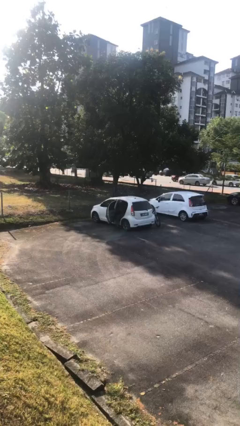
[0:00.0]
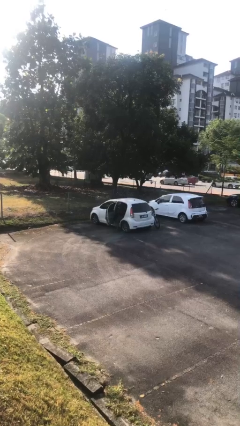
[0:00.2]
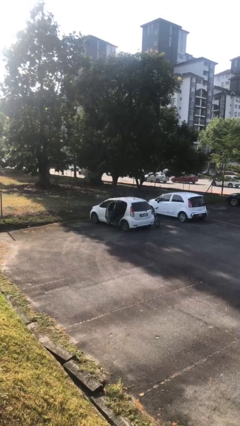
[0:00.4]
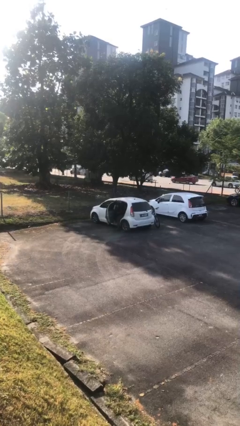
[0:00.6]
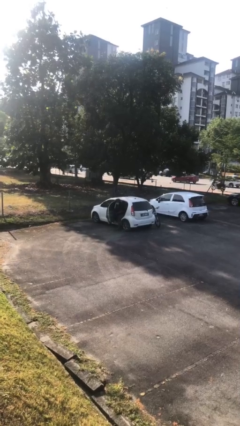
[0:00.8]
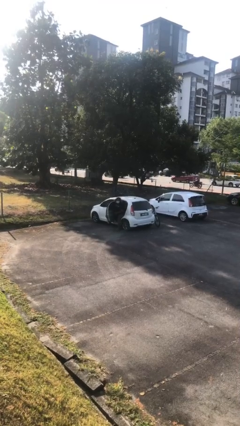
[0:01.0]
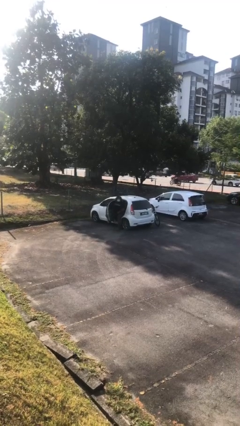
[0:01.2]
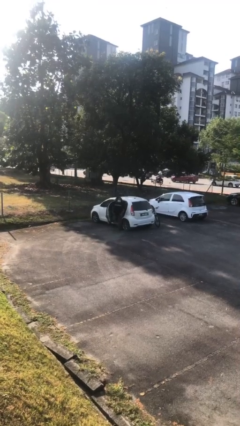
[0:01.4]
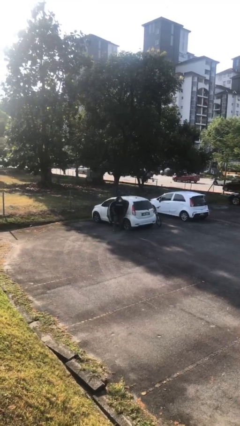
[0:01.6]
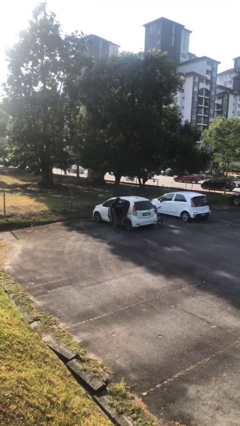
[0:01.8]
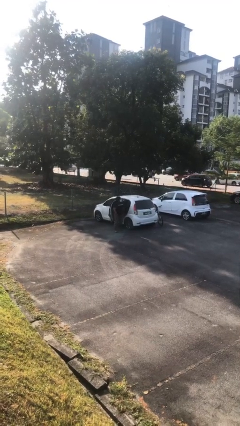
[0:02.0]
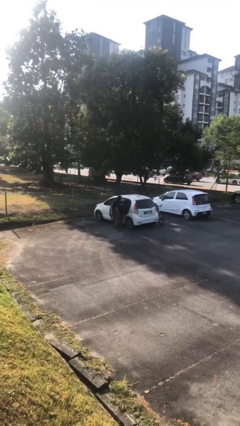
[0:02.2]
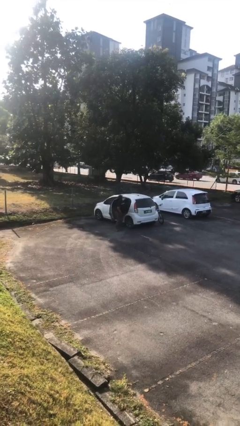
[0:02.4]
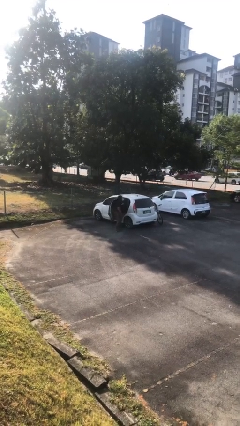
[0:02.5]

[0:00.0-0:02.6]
person exits car

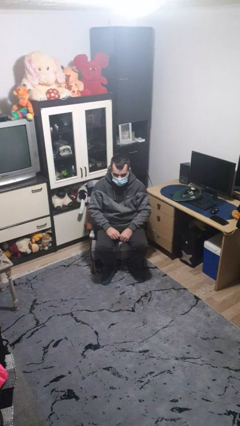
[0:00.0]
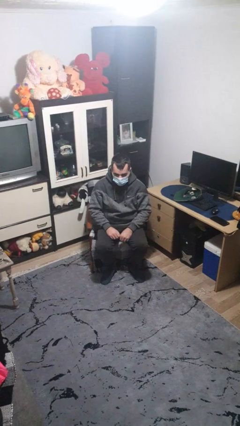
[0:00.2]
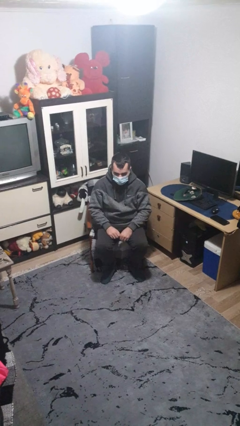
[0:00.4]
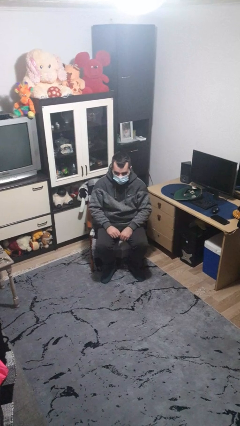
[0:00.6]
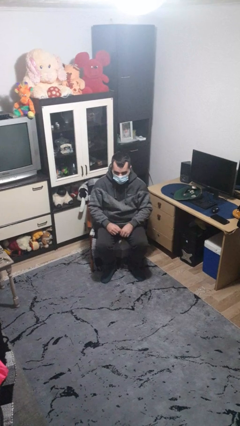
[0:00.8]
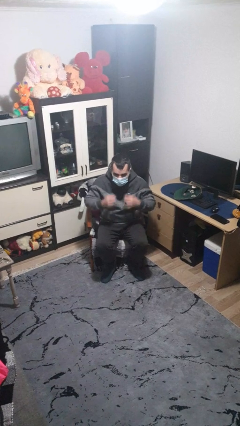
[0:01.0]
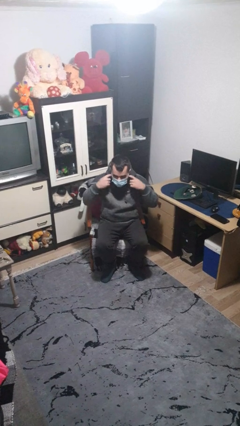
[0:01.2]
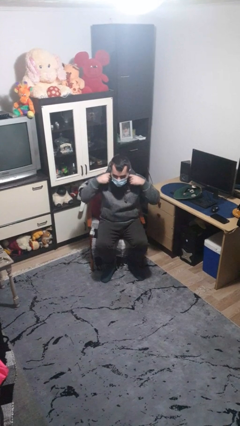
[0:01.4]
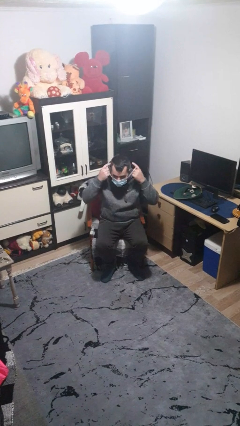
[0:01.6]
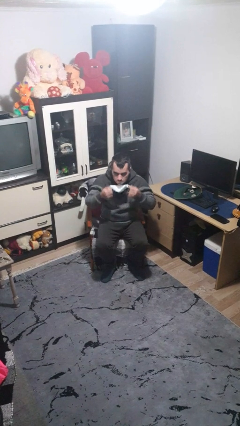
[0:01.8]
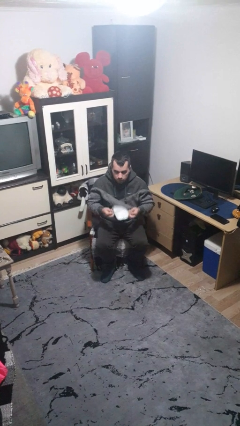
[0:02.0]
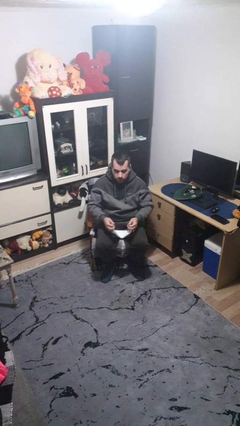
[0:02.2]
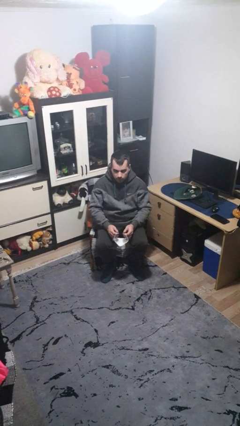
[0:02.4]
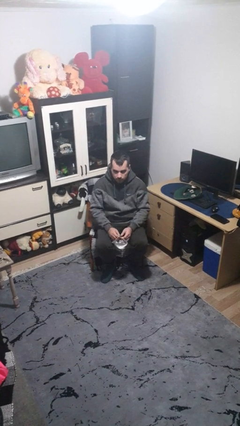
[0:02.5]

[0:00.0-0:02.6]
person takes off facemask

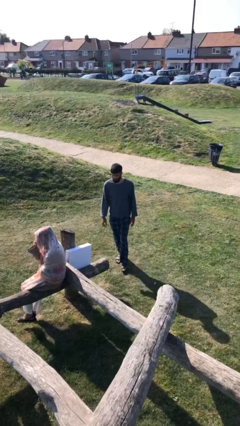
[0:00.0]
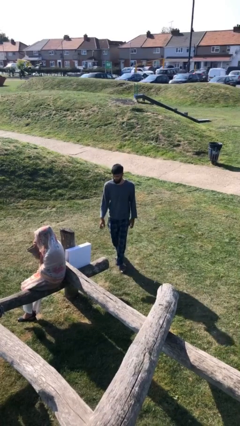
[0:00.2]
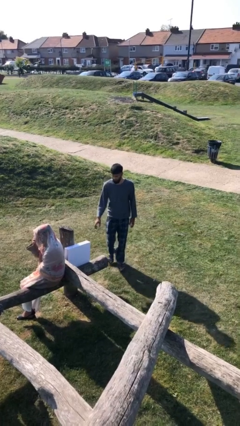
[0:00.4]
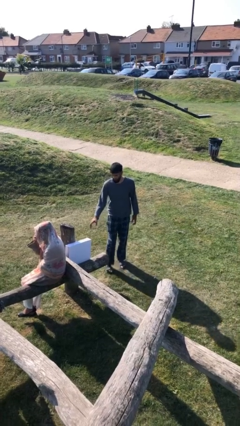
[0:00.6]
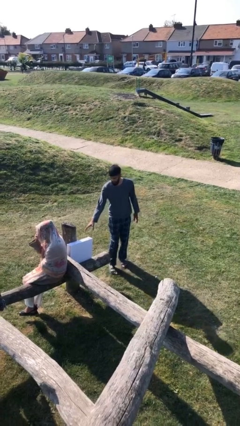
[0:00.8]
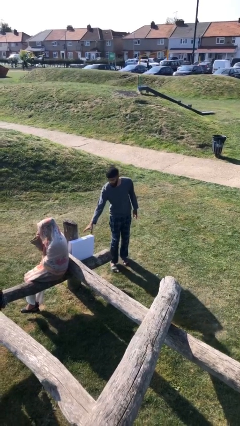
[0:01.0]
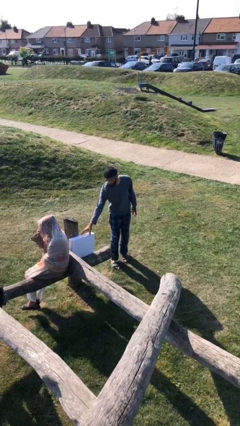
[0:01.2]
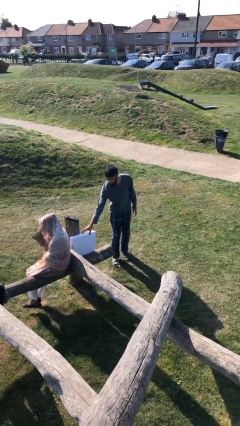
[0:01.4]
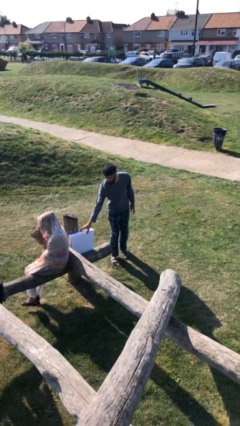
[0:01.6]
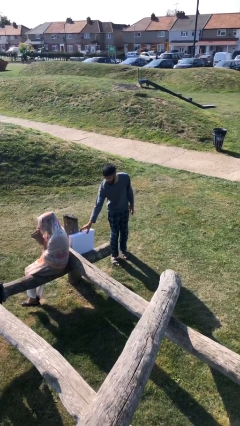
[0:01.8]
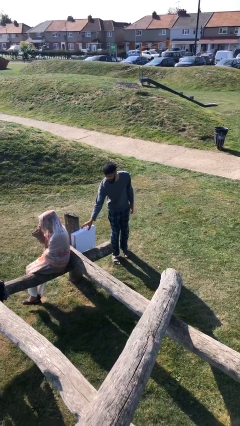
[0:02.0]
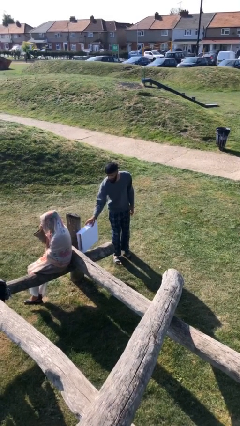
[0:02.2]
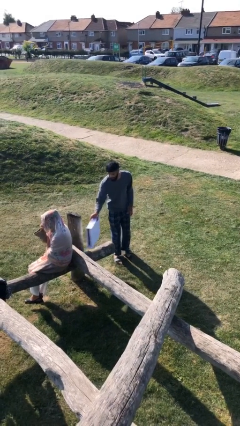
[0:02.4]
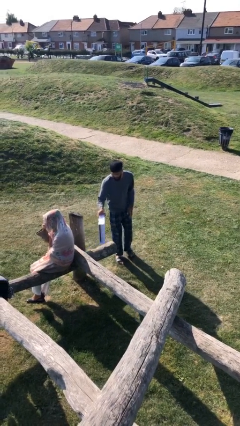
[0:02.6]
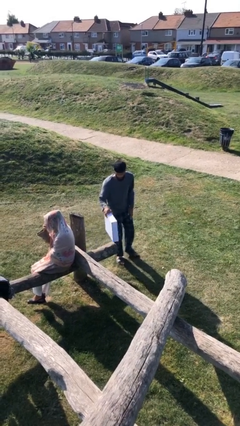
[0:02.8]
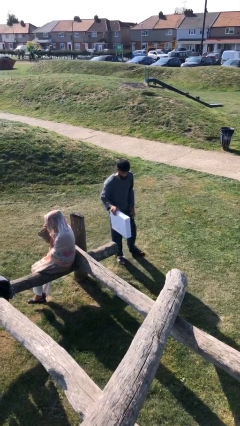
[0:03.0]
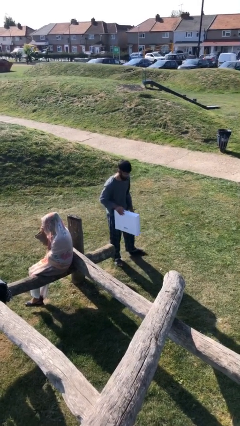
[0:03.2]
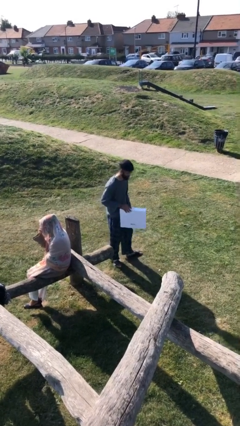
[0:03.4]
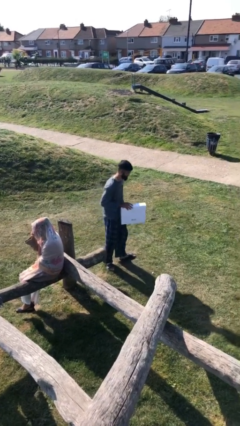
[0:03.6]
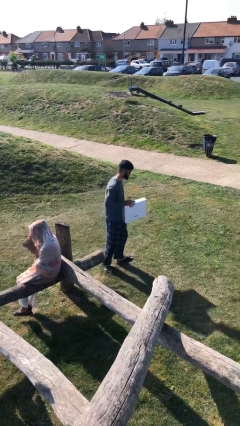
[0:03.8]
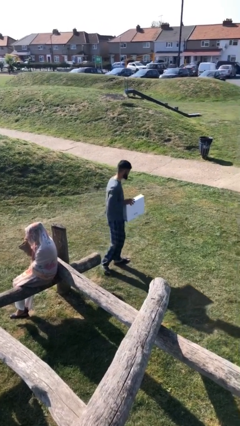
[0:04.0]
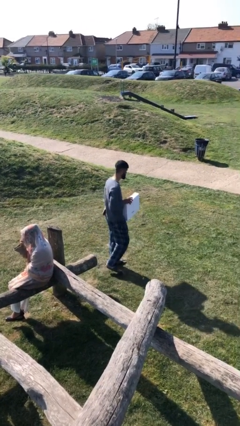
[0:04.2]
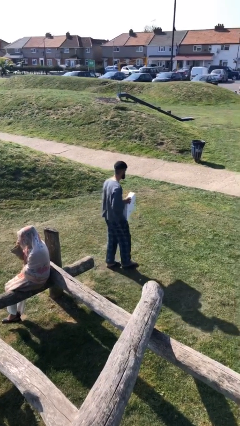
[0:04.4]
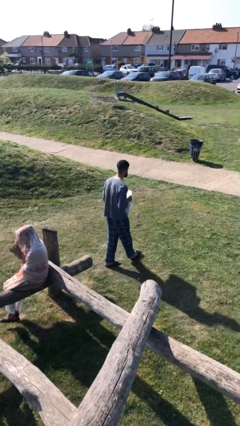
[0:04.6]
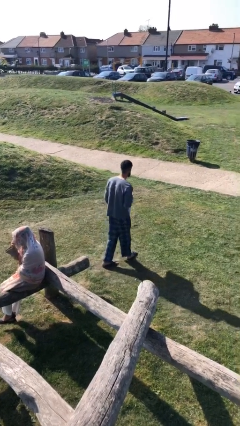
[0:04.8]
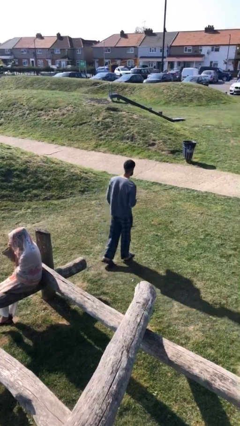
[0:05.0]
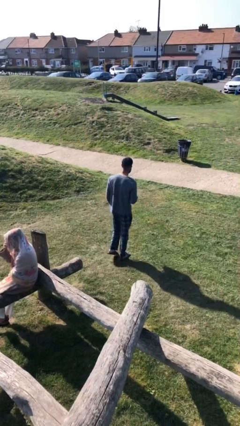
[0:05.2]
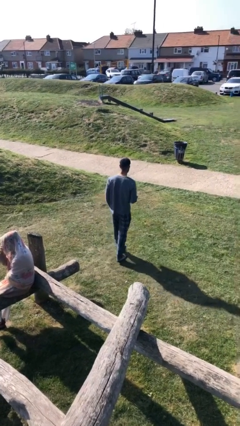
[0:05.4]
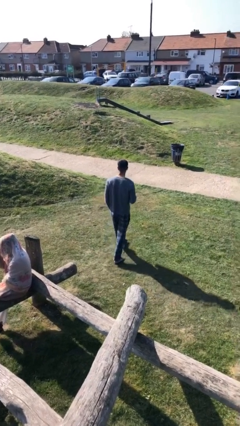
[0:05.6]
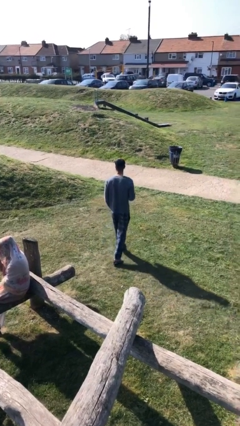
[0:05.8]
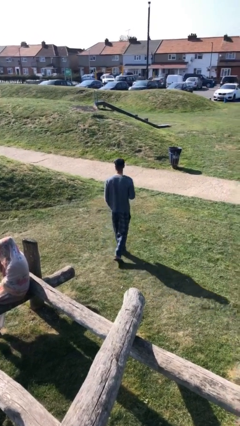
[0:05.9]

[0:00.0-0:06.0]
person steals object from person

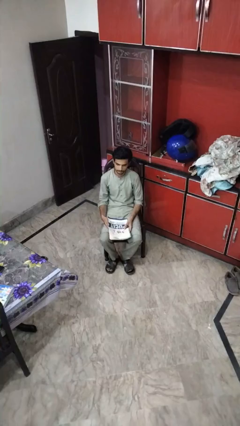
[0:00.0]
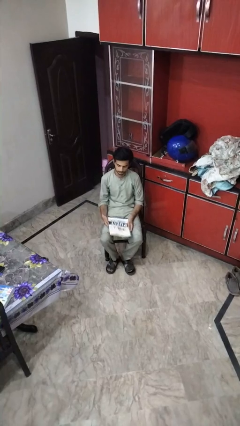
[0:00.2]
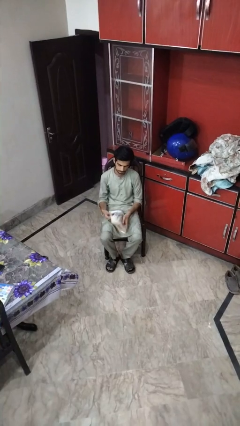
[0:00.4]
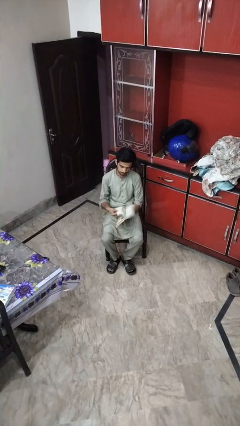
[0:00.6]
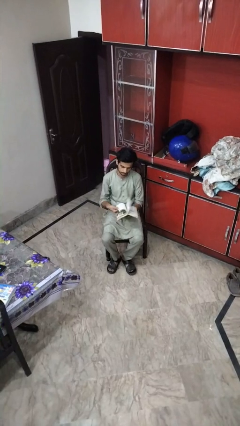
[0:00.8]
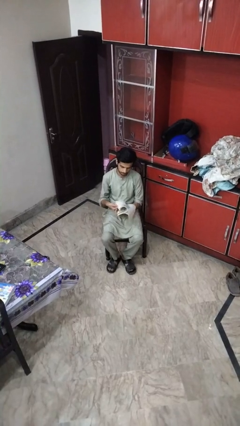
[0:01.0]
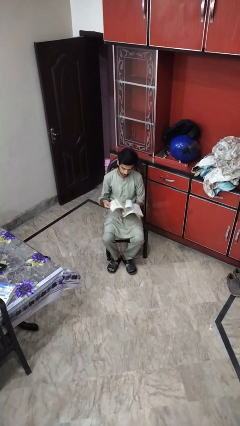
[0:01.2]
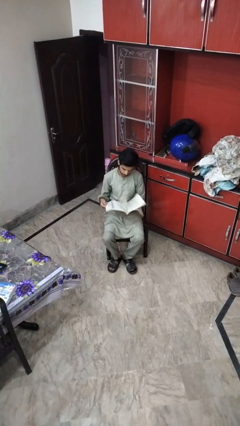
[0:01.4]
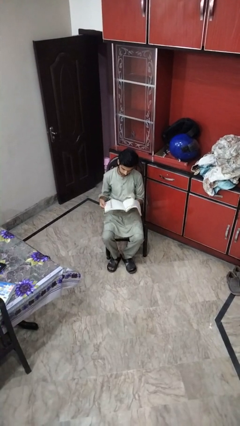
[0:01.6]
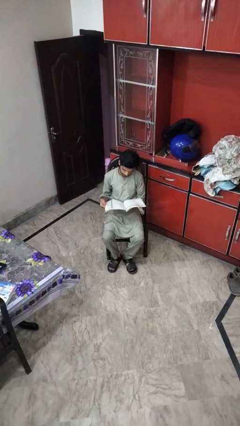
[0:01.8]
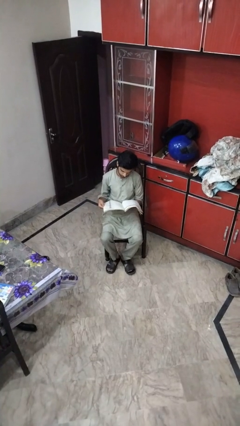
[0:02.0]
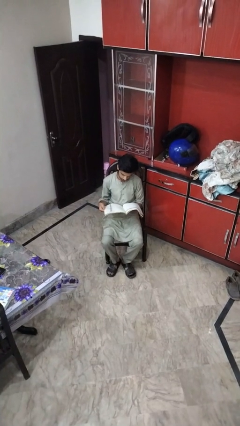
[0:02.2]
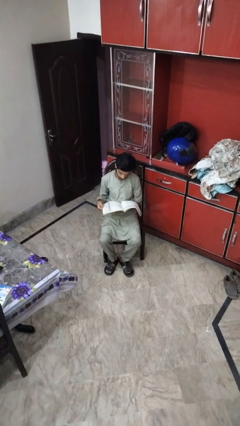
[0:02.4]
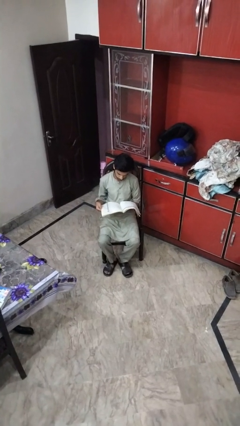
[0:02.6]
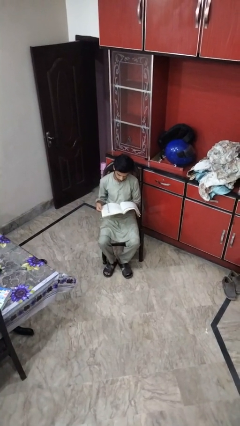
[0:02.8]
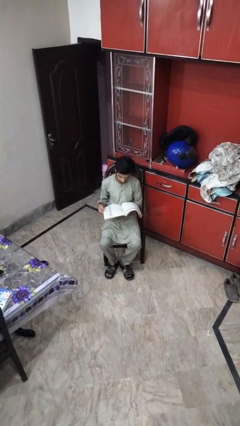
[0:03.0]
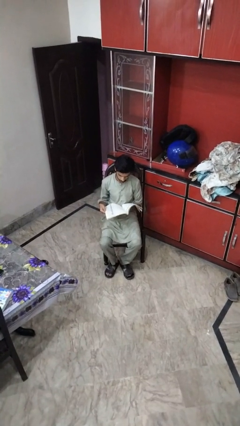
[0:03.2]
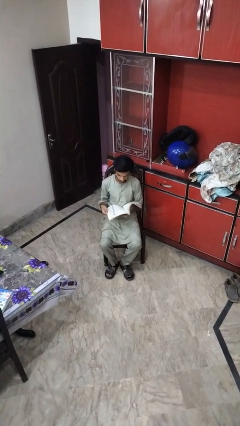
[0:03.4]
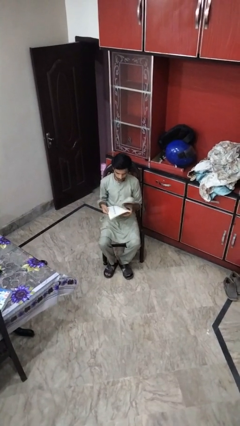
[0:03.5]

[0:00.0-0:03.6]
person reads magazine

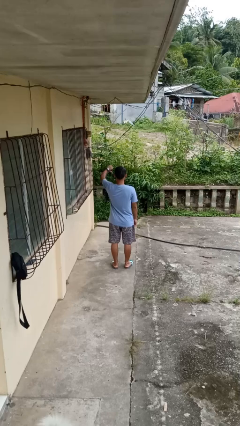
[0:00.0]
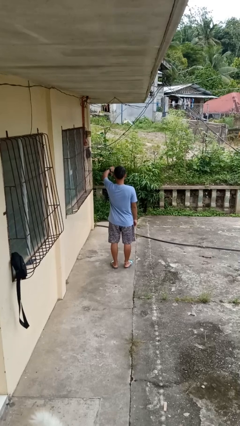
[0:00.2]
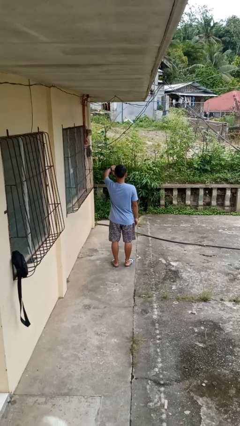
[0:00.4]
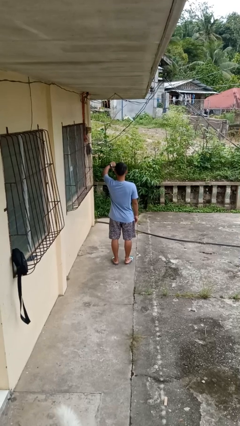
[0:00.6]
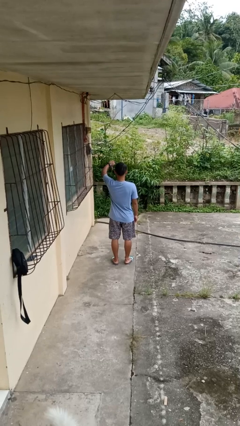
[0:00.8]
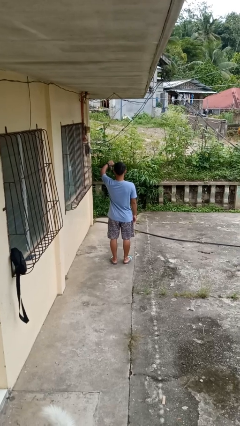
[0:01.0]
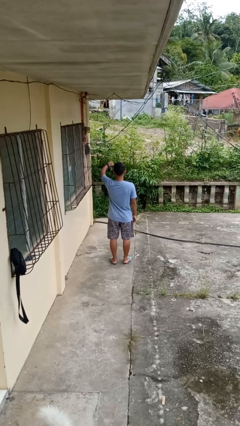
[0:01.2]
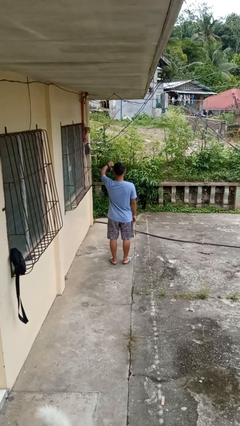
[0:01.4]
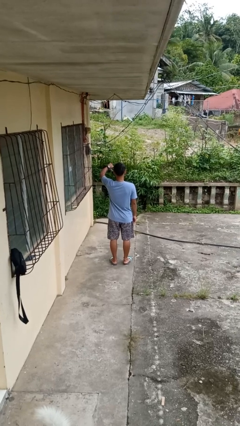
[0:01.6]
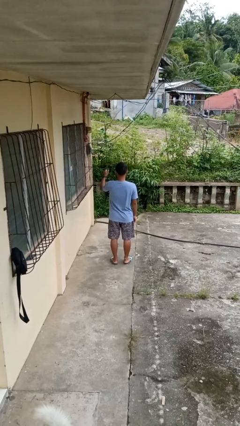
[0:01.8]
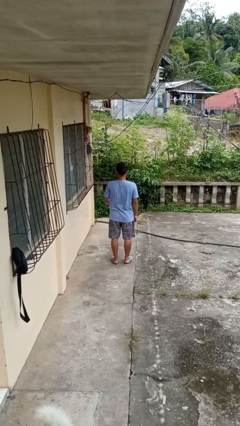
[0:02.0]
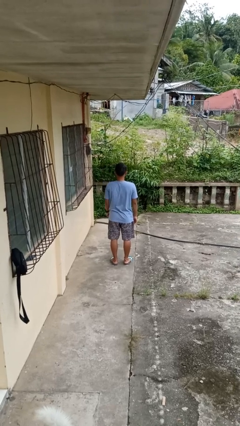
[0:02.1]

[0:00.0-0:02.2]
person gestures thumbs down

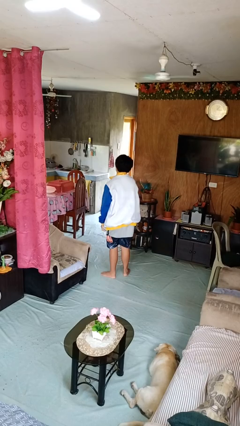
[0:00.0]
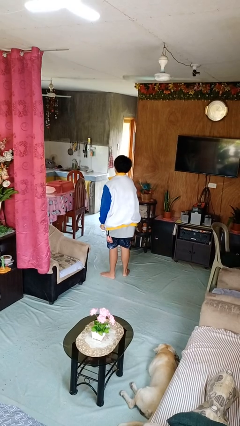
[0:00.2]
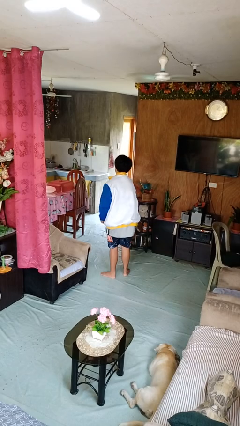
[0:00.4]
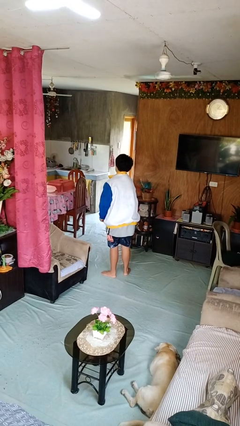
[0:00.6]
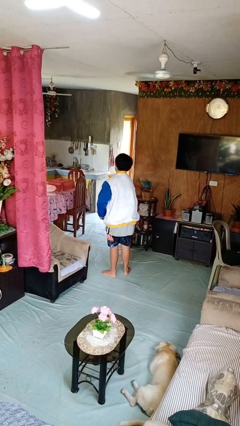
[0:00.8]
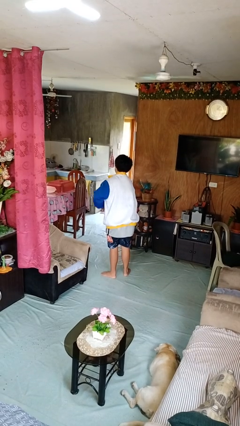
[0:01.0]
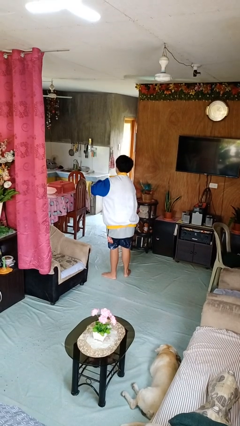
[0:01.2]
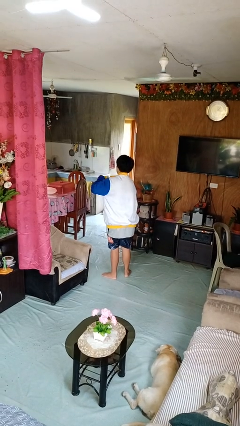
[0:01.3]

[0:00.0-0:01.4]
person zips up jacket
